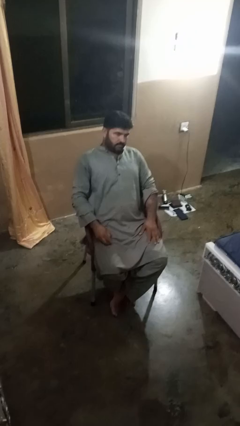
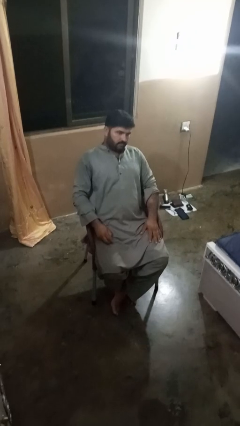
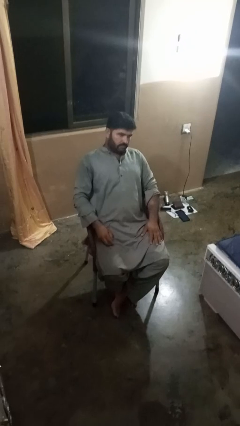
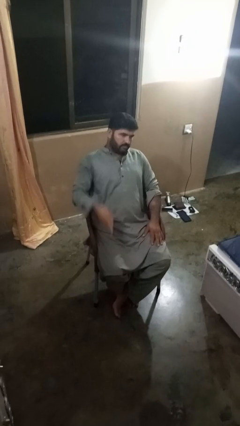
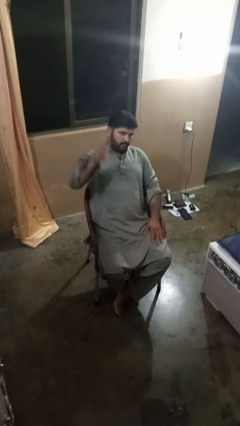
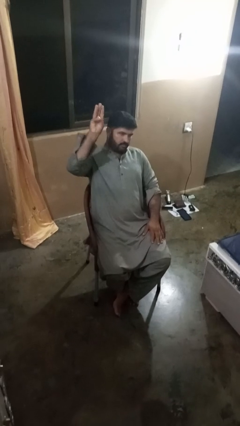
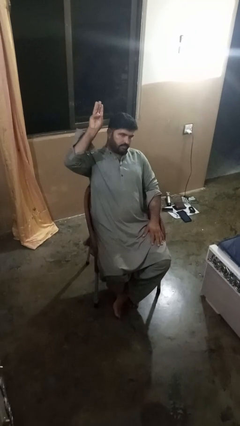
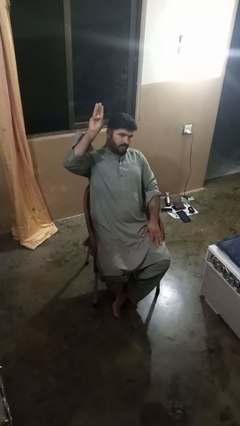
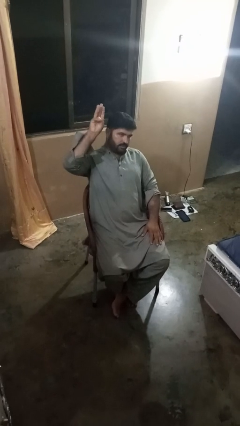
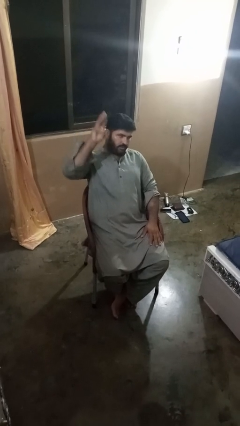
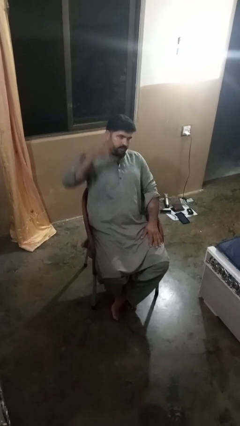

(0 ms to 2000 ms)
person gestures number three

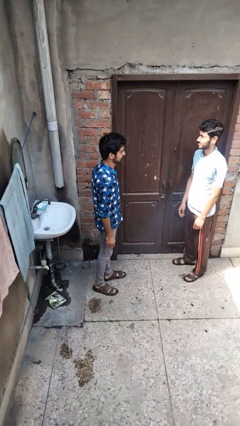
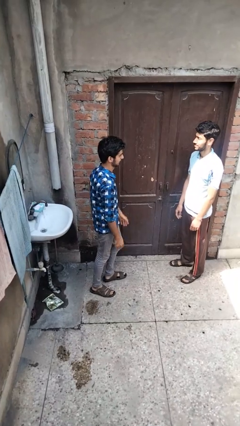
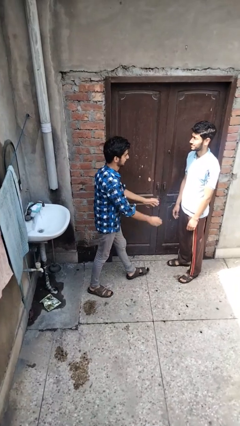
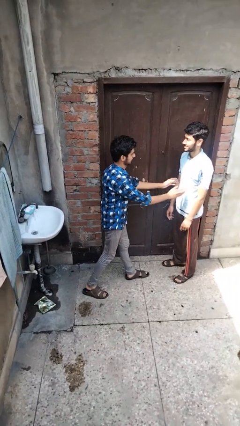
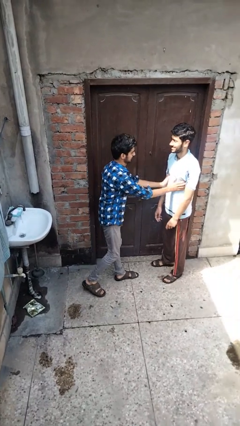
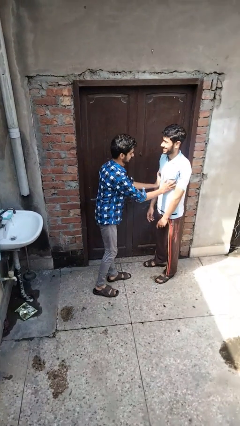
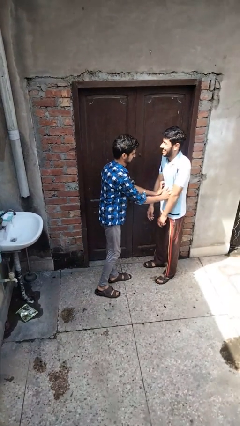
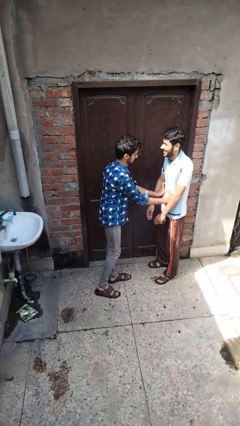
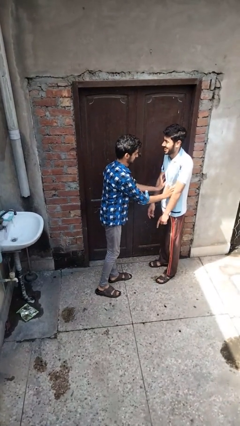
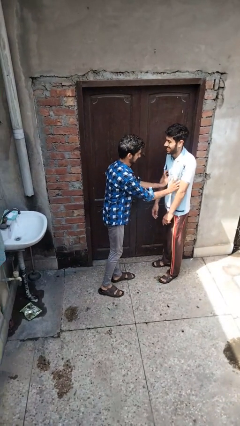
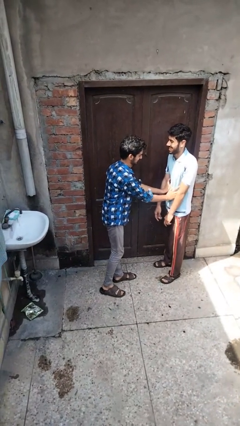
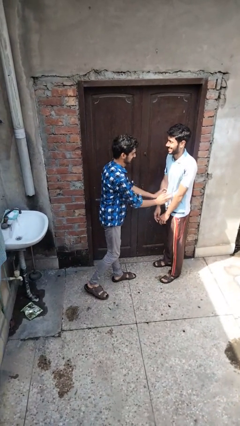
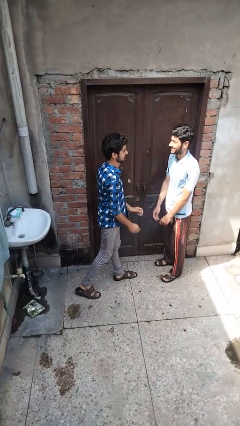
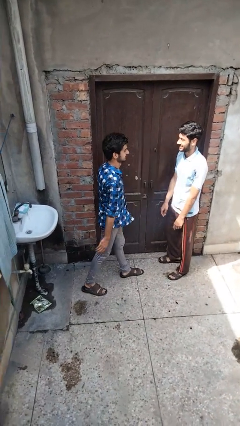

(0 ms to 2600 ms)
person tickles person

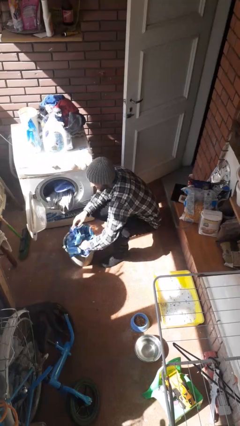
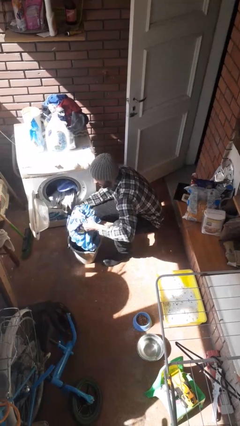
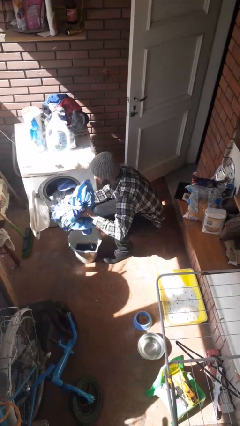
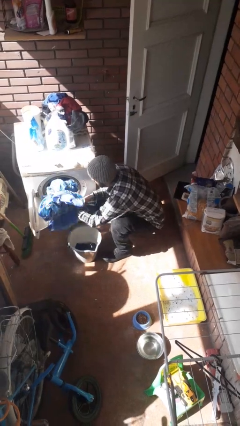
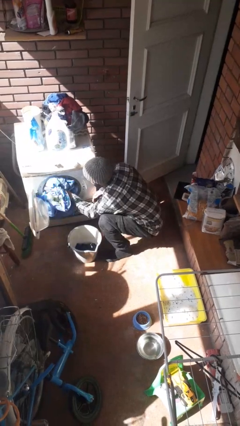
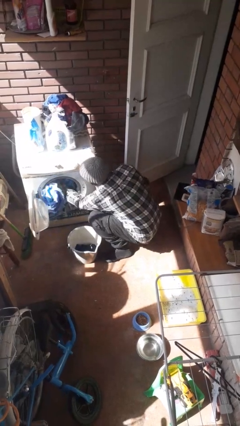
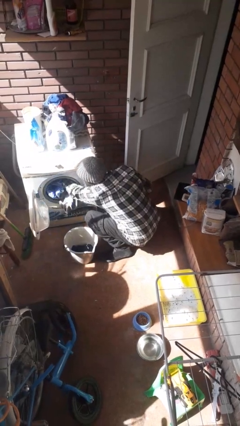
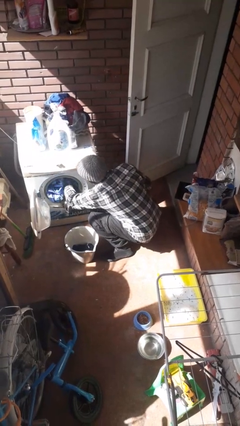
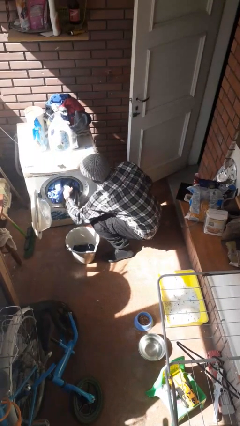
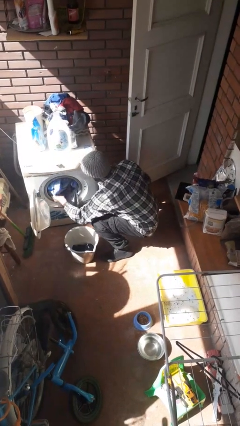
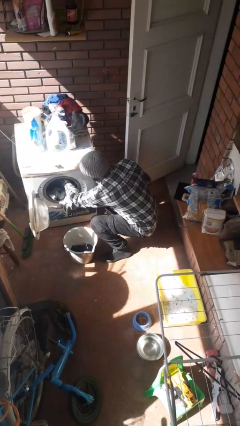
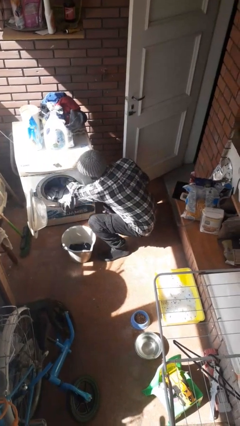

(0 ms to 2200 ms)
person loads clotheswasher

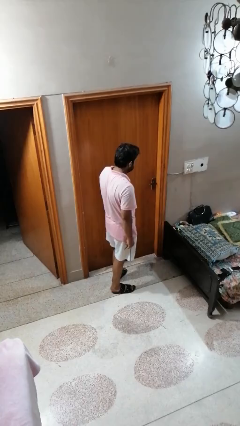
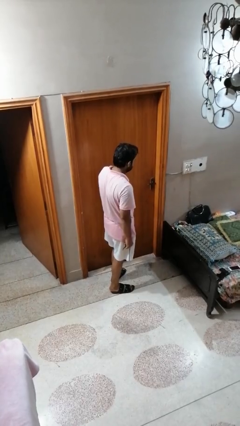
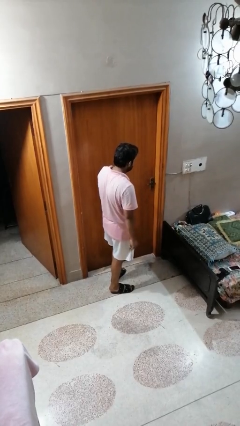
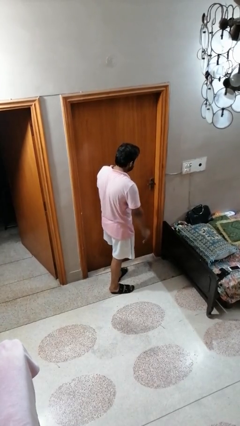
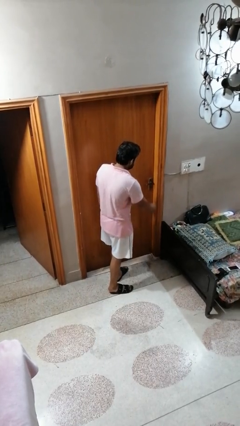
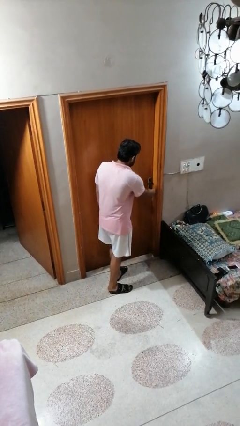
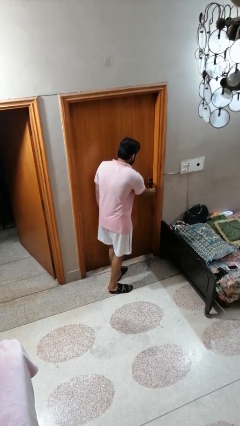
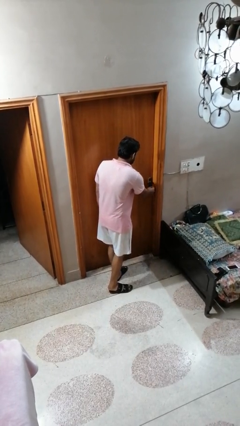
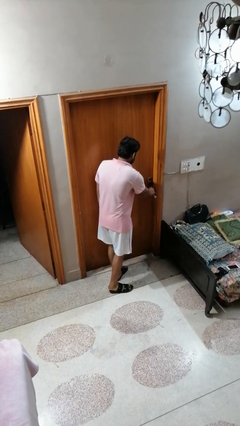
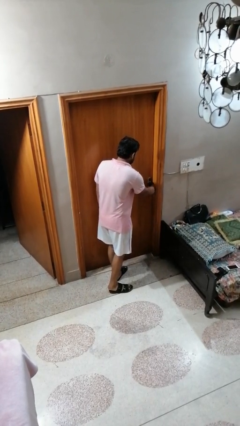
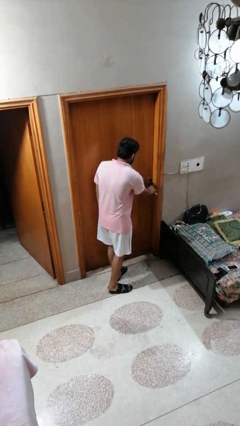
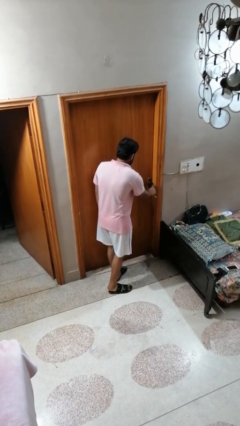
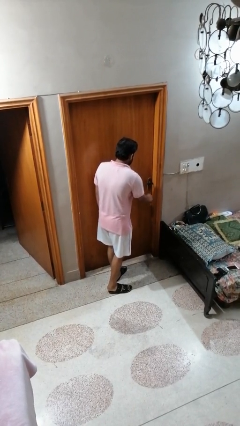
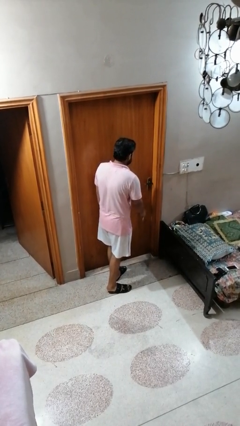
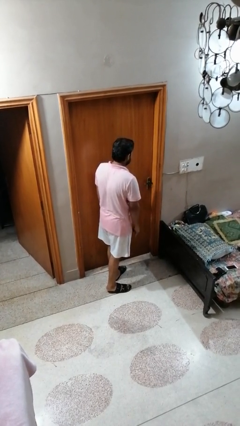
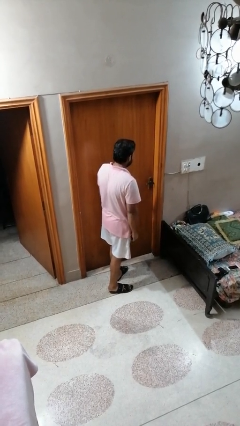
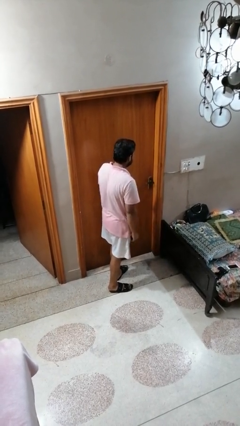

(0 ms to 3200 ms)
person unlocks door with keys

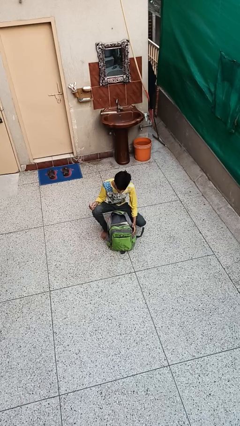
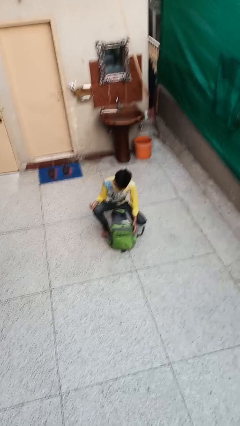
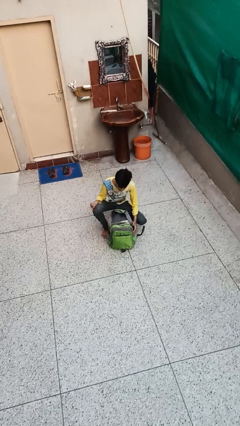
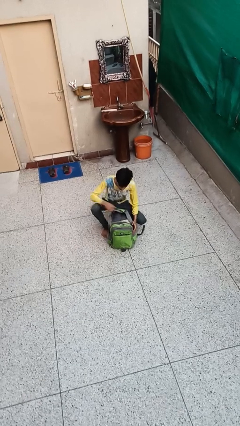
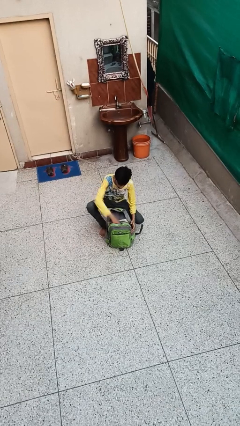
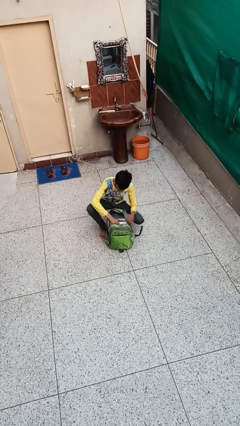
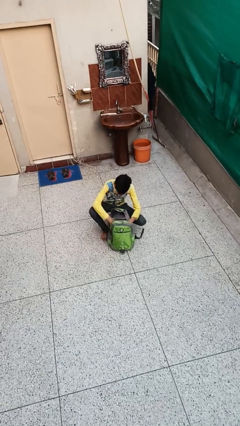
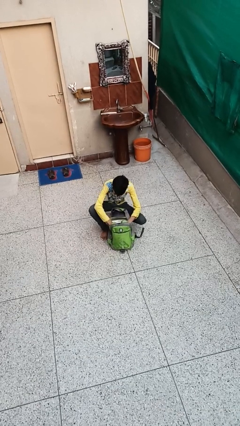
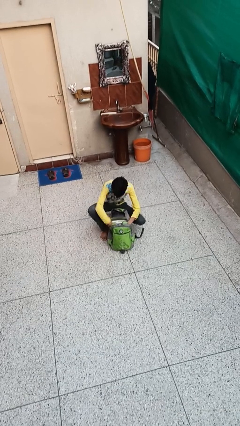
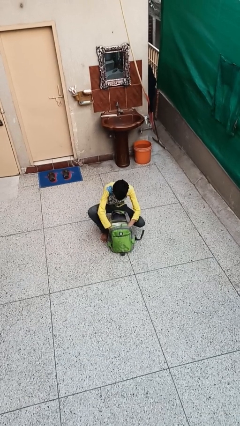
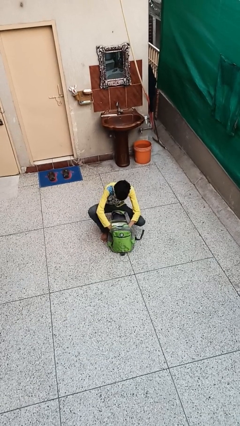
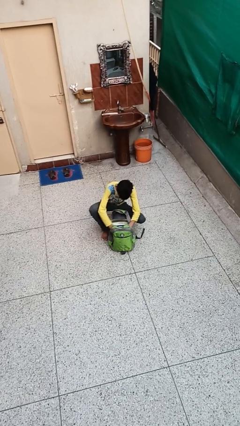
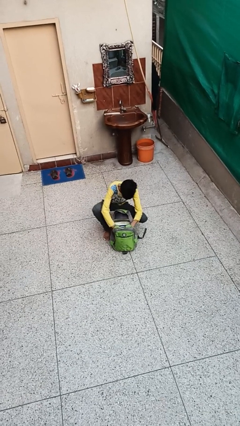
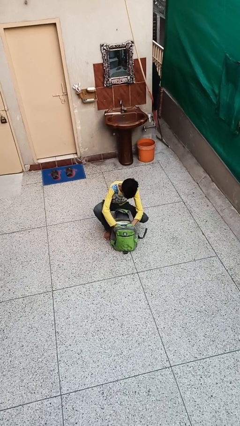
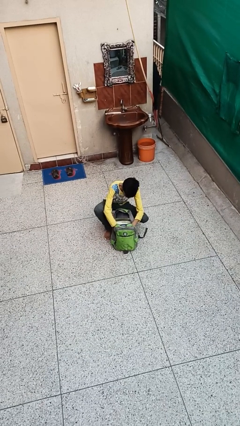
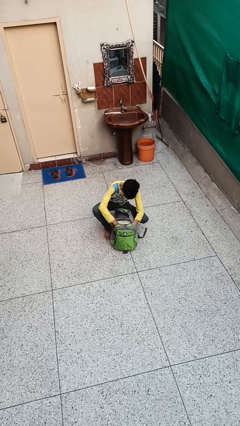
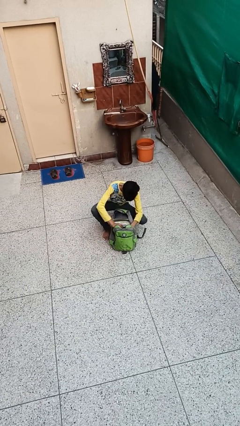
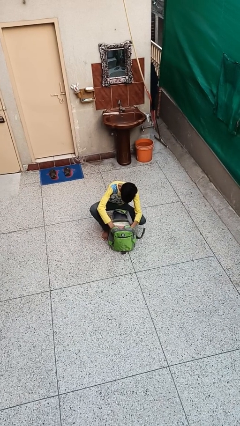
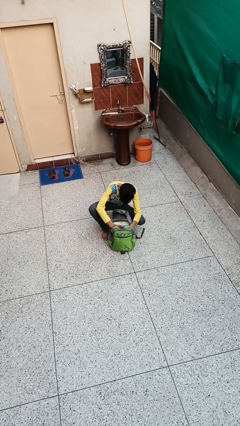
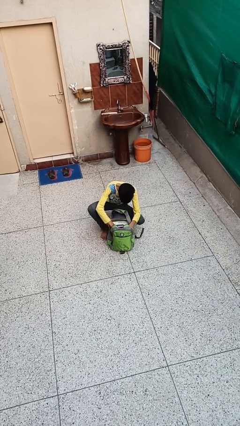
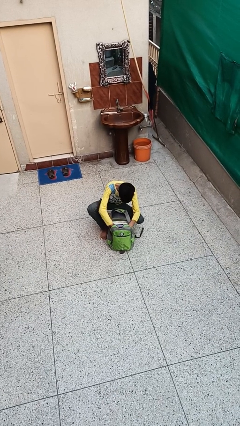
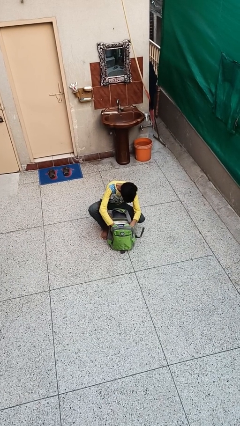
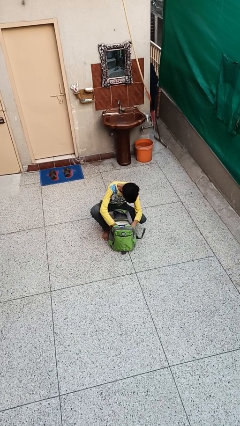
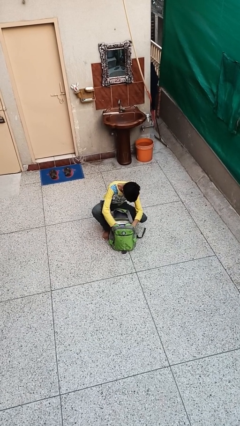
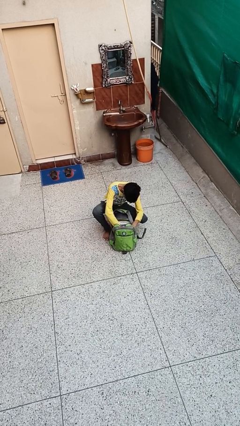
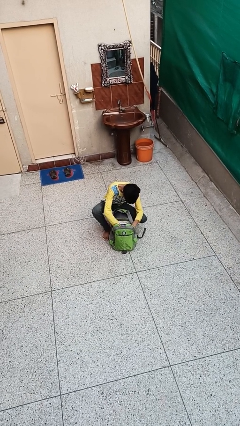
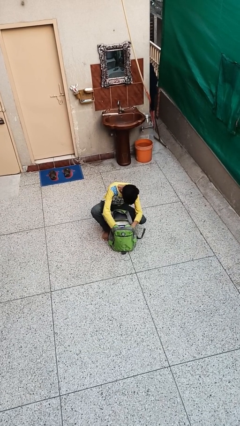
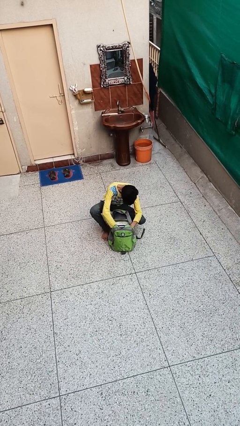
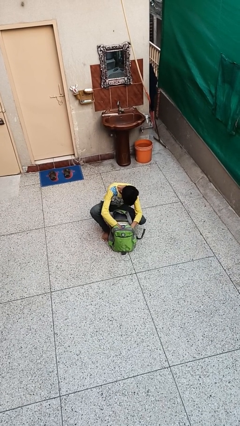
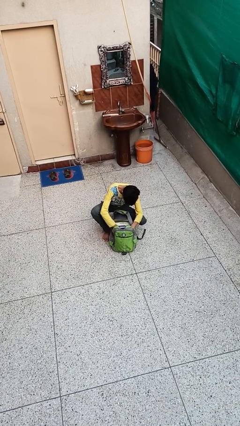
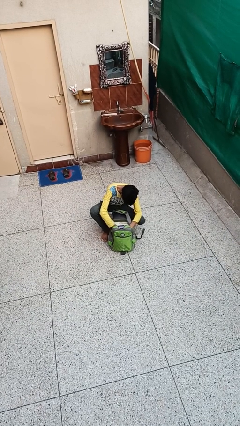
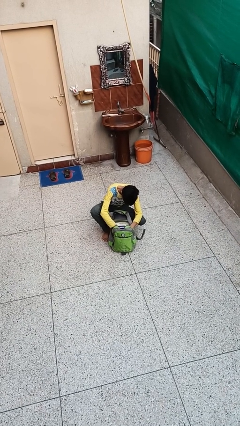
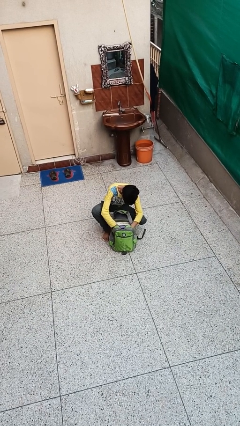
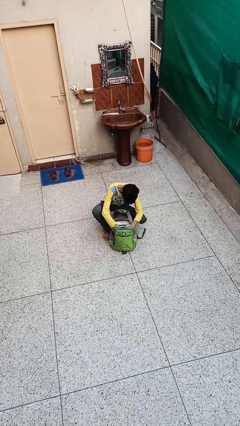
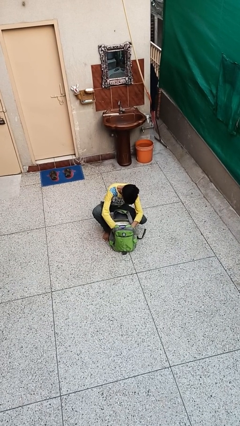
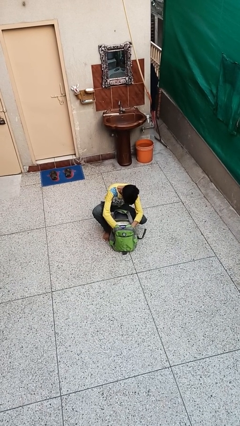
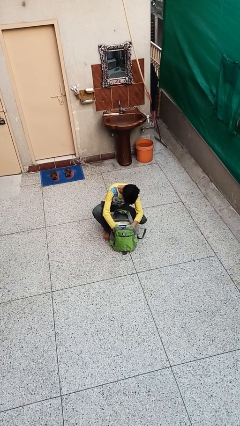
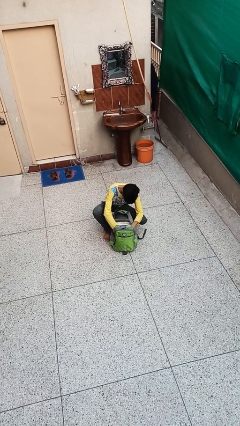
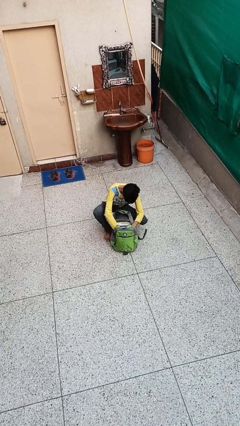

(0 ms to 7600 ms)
person searches in backpack

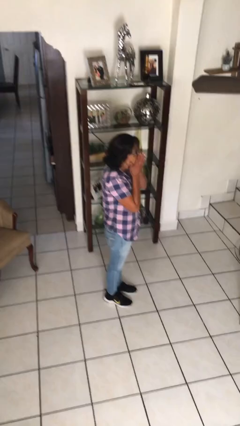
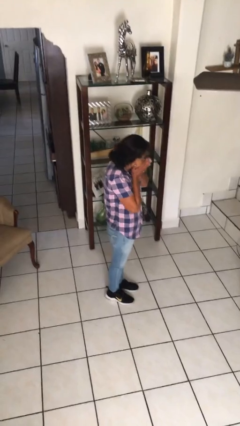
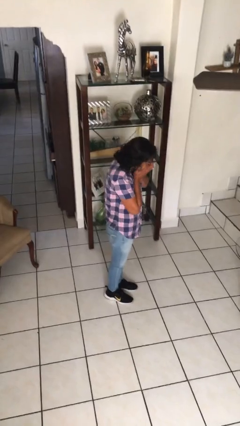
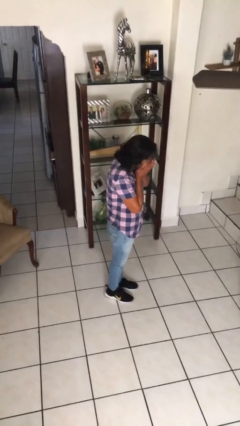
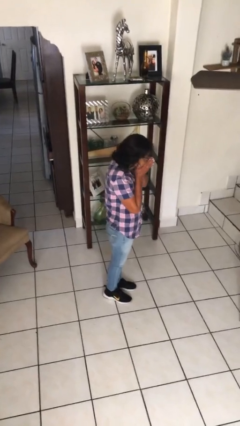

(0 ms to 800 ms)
person sneezes into hand
